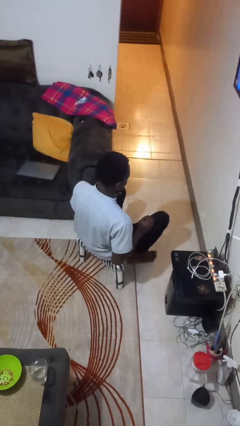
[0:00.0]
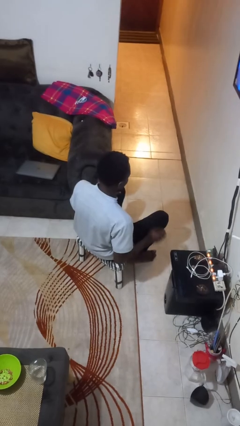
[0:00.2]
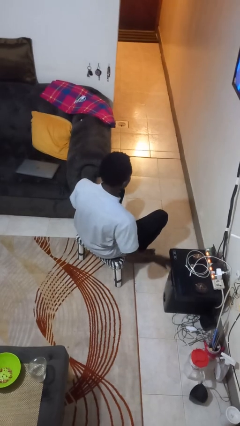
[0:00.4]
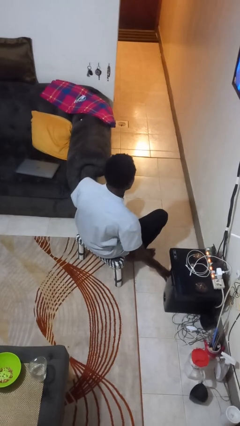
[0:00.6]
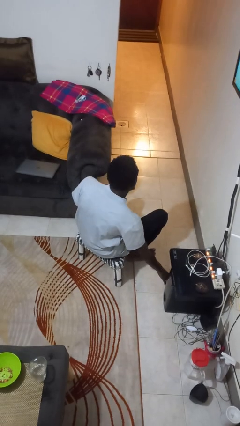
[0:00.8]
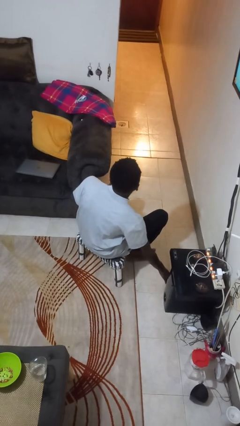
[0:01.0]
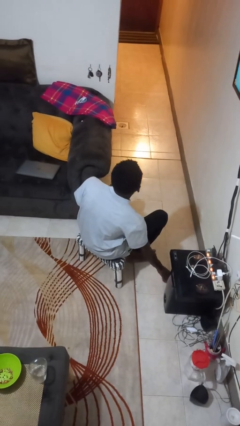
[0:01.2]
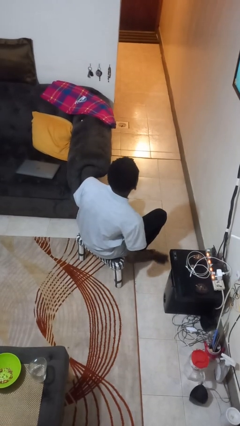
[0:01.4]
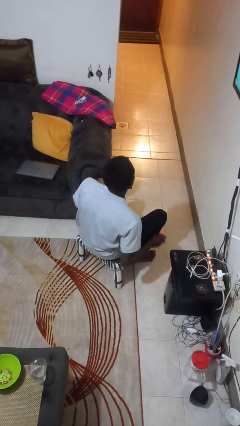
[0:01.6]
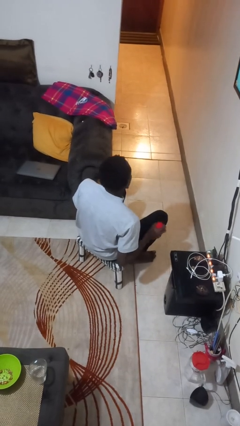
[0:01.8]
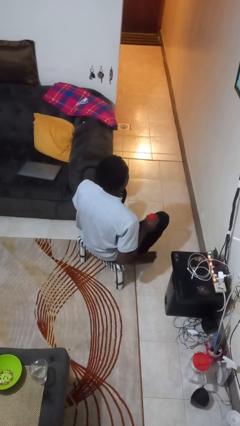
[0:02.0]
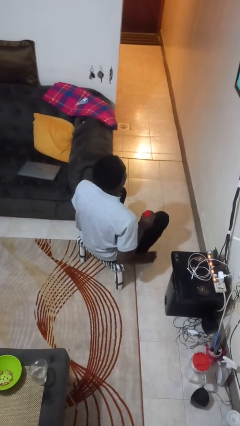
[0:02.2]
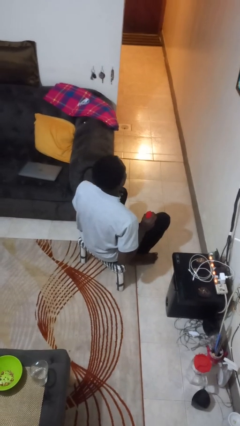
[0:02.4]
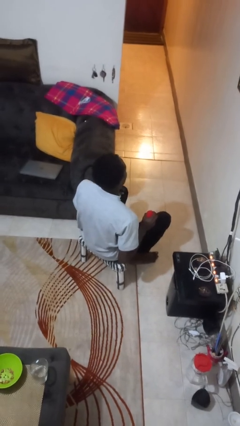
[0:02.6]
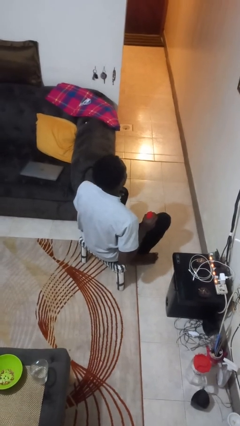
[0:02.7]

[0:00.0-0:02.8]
person picks up object from floor

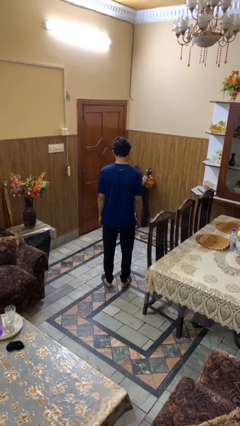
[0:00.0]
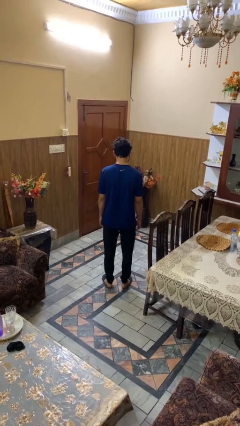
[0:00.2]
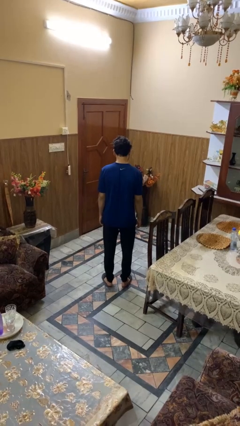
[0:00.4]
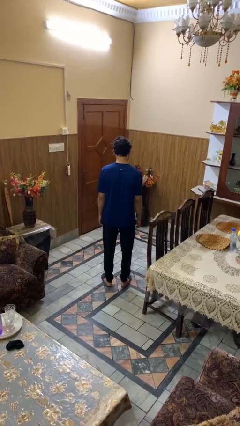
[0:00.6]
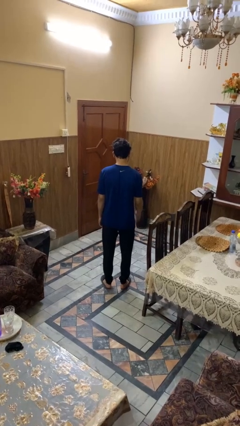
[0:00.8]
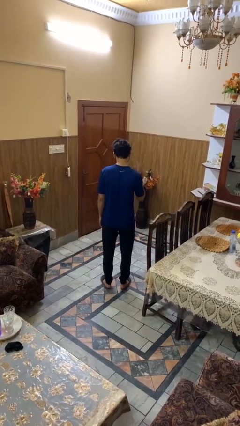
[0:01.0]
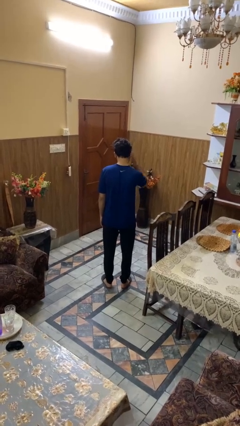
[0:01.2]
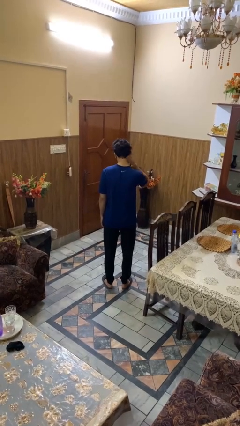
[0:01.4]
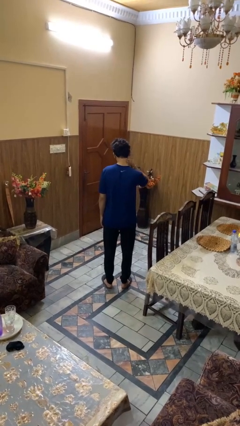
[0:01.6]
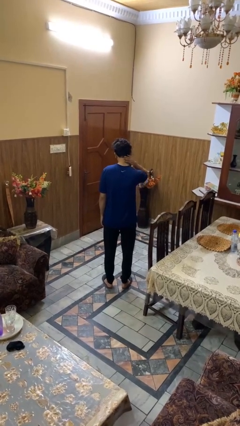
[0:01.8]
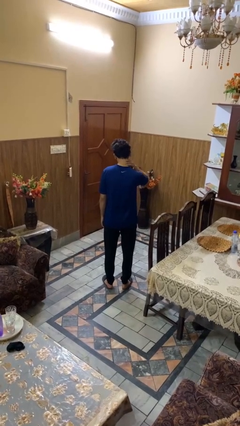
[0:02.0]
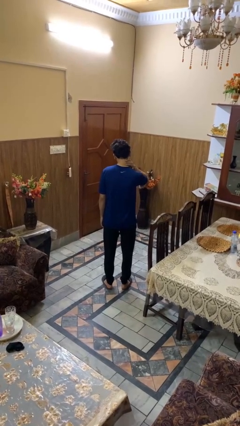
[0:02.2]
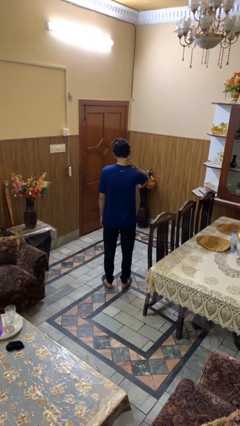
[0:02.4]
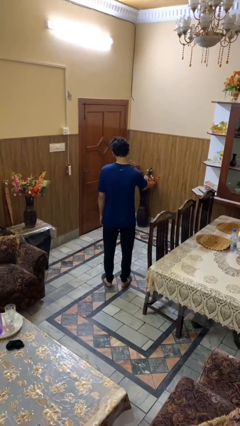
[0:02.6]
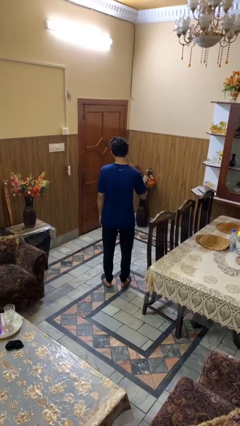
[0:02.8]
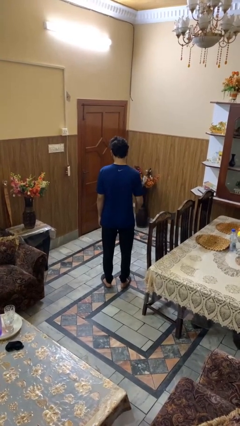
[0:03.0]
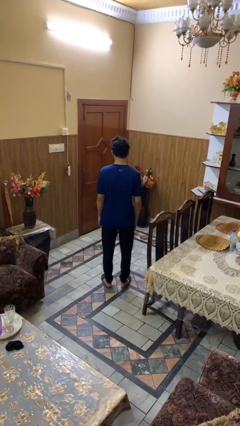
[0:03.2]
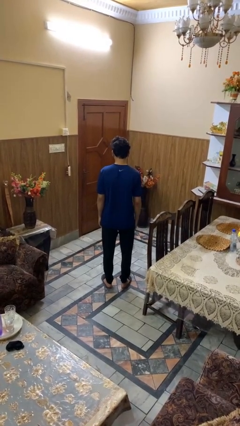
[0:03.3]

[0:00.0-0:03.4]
person rubs neck

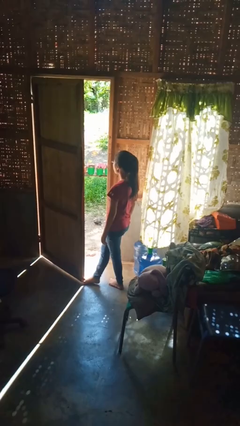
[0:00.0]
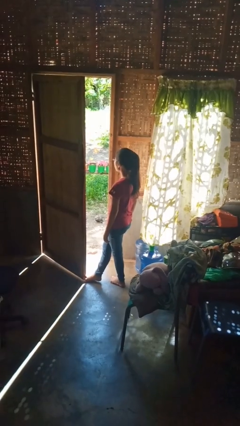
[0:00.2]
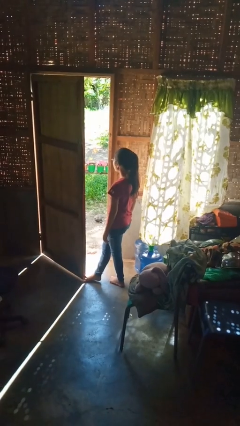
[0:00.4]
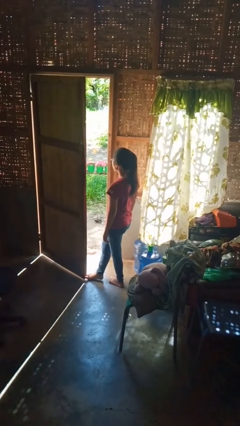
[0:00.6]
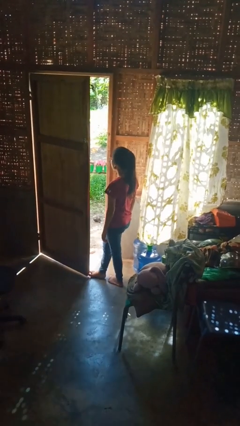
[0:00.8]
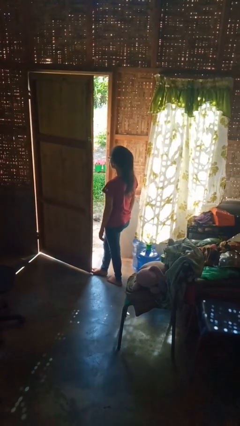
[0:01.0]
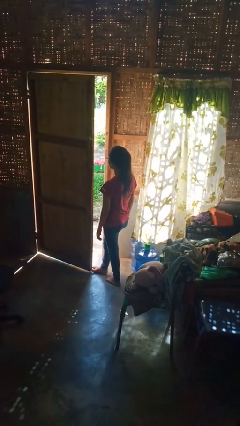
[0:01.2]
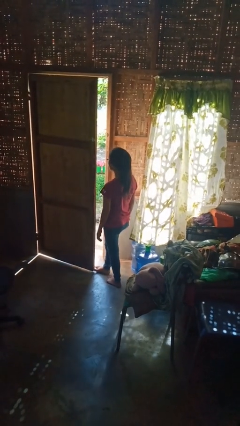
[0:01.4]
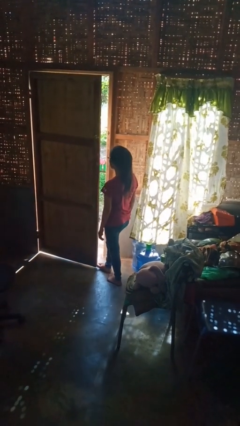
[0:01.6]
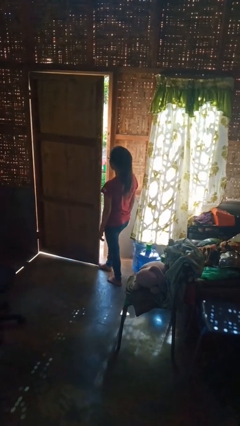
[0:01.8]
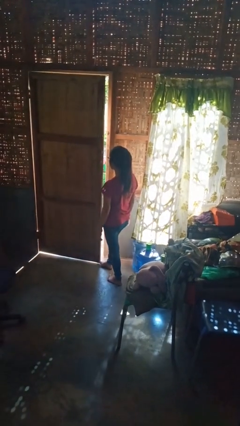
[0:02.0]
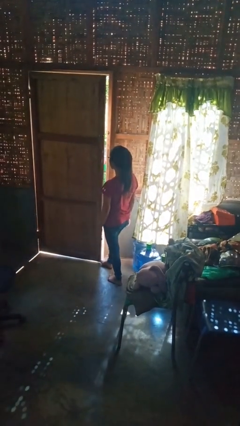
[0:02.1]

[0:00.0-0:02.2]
person closes door with foot

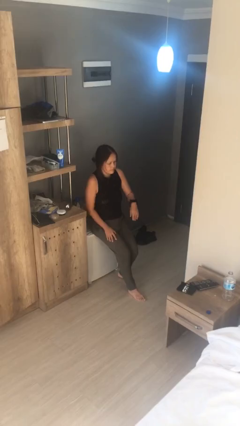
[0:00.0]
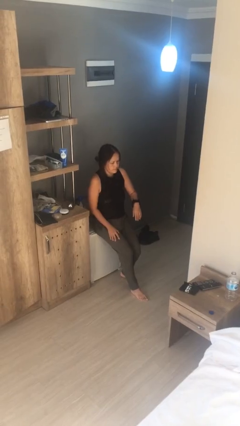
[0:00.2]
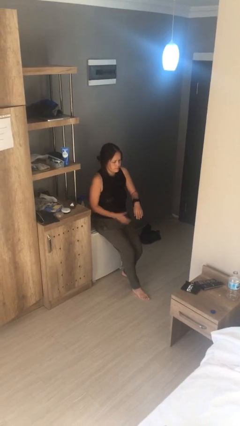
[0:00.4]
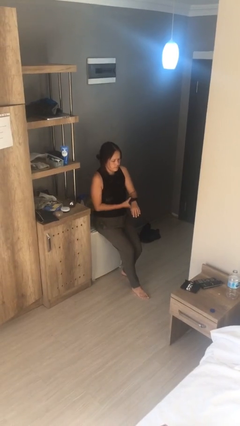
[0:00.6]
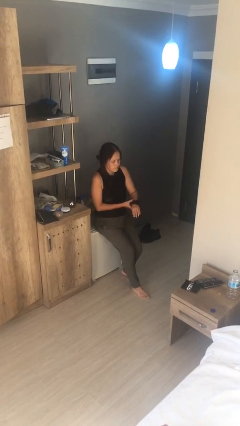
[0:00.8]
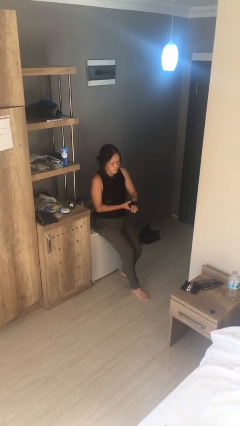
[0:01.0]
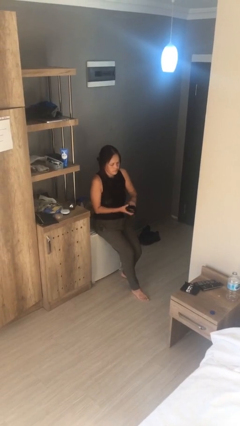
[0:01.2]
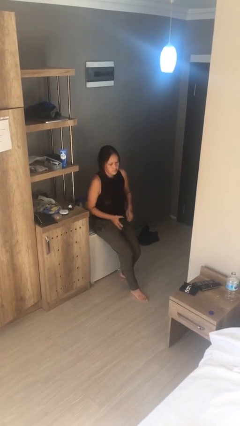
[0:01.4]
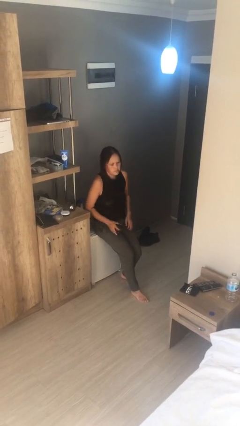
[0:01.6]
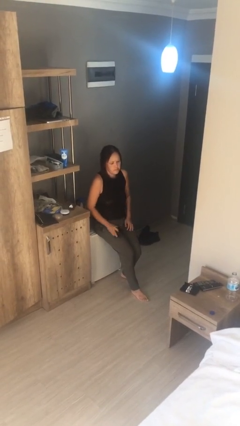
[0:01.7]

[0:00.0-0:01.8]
person takes off wristwatch

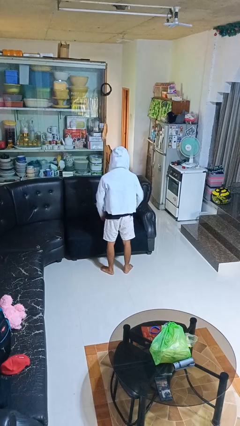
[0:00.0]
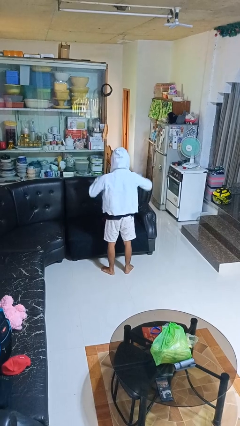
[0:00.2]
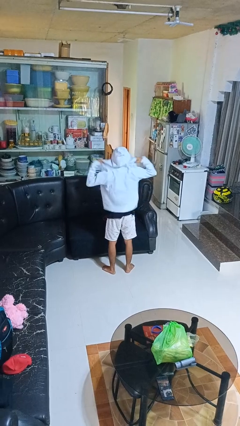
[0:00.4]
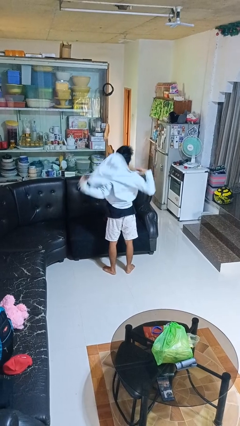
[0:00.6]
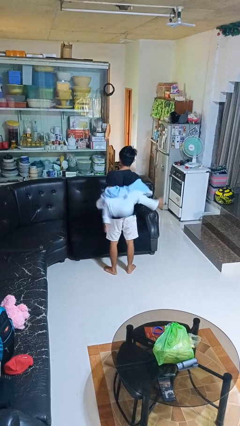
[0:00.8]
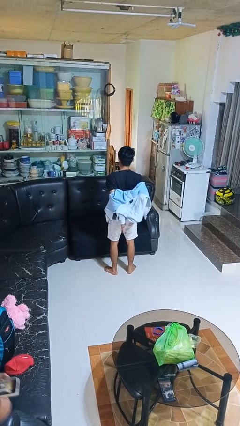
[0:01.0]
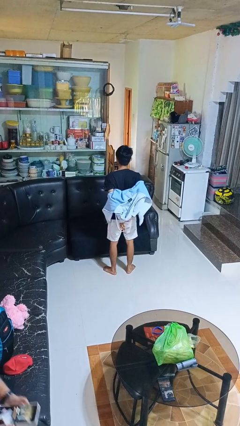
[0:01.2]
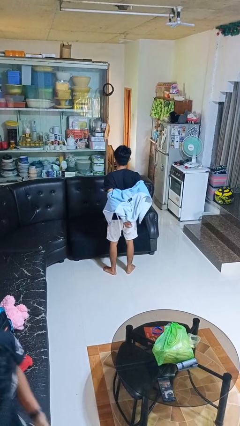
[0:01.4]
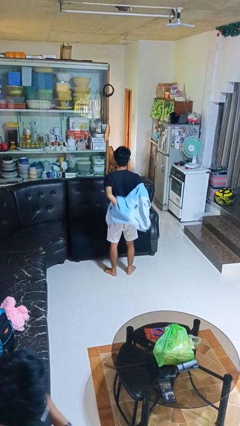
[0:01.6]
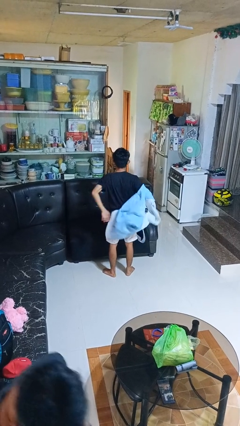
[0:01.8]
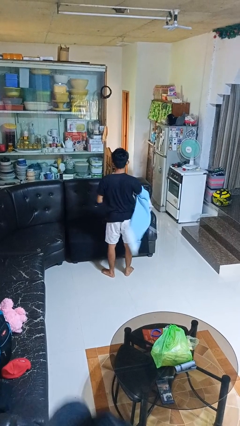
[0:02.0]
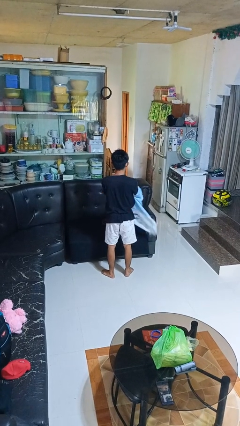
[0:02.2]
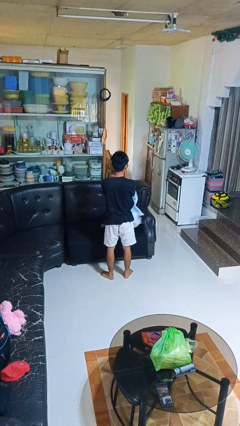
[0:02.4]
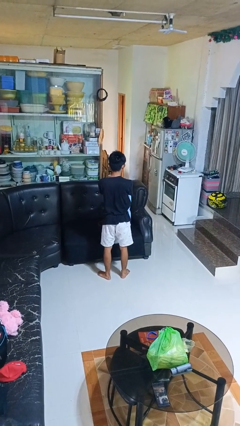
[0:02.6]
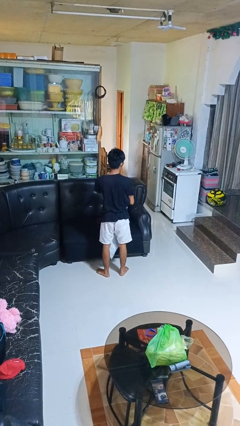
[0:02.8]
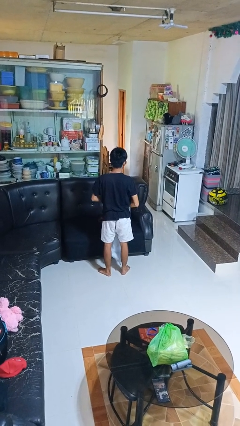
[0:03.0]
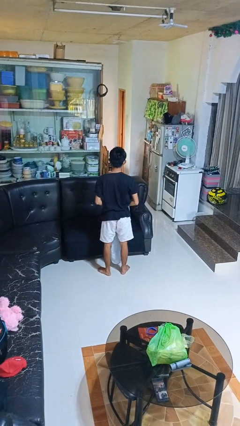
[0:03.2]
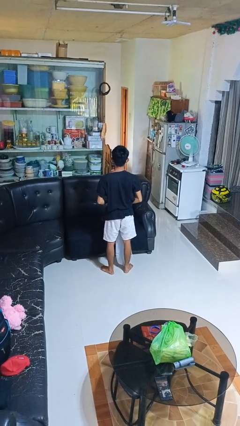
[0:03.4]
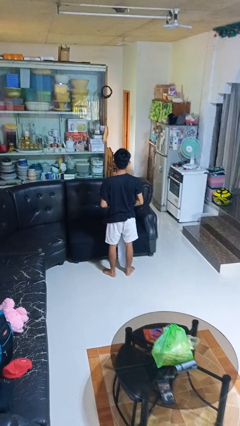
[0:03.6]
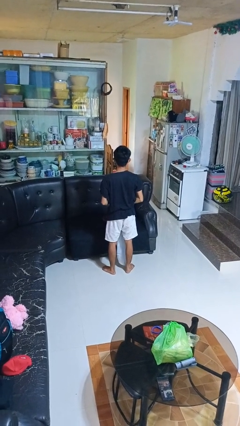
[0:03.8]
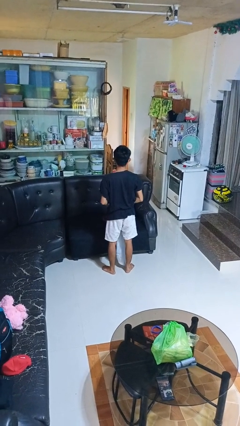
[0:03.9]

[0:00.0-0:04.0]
person takes off hoodie

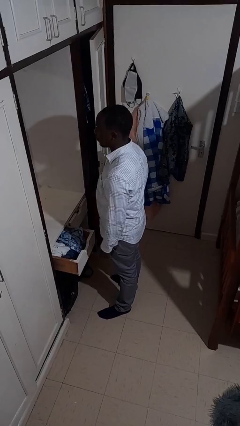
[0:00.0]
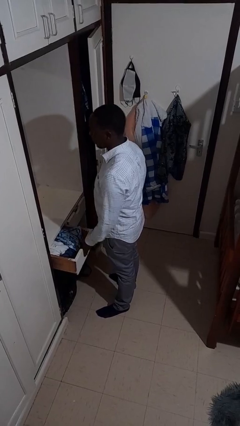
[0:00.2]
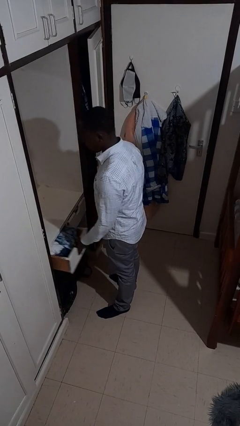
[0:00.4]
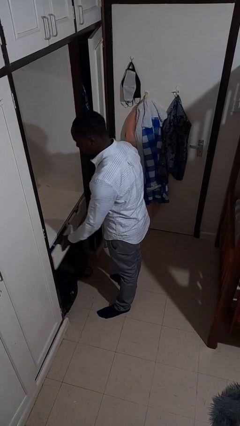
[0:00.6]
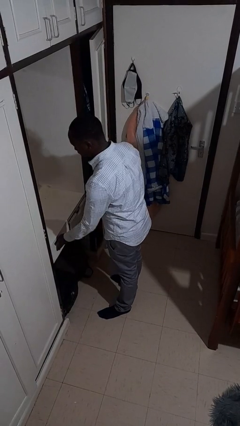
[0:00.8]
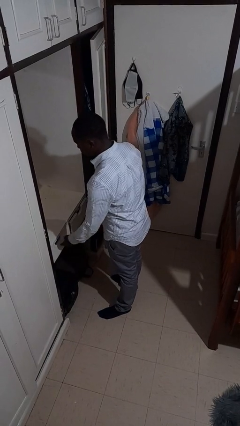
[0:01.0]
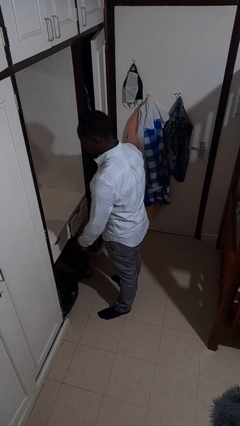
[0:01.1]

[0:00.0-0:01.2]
person closes dresser drawer

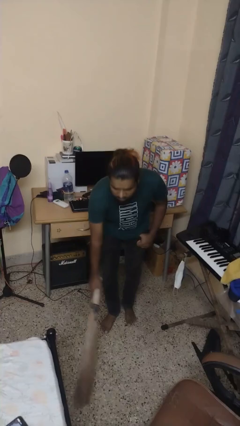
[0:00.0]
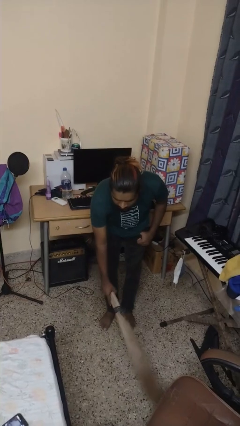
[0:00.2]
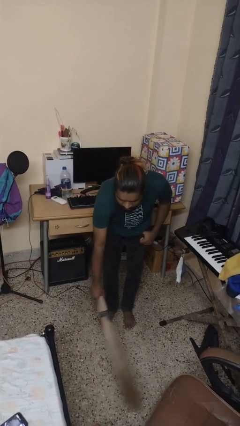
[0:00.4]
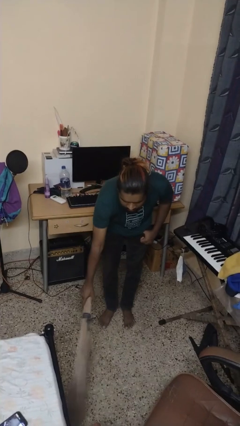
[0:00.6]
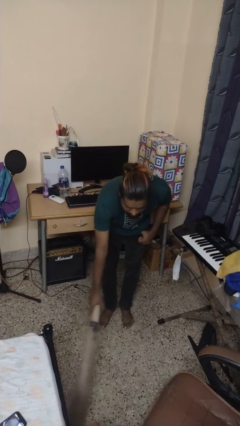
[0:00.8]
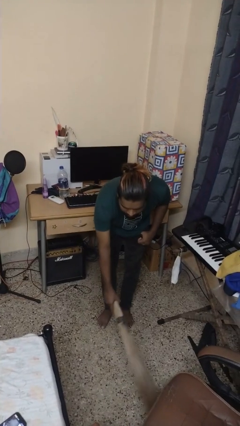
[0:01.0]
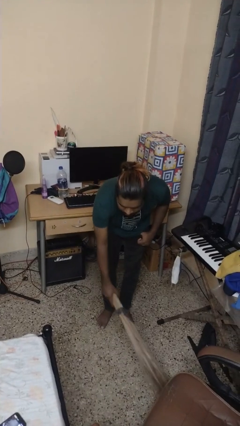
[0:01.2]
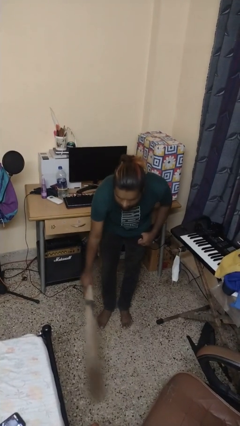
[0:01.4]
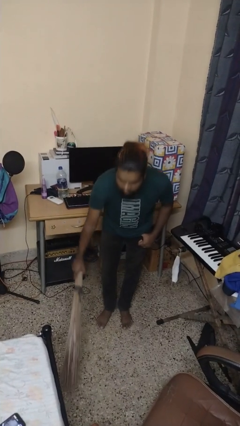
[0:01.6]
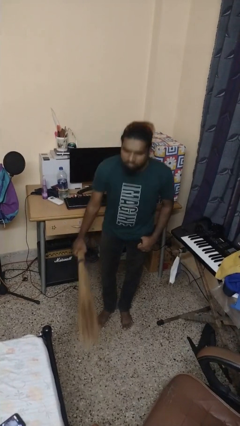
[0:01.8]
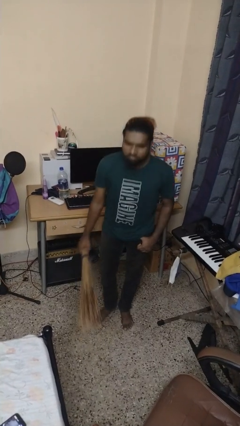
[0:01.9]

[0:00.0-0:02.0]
person sweeps floor
